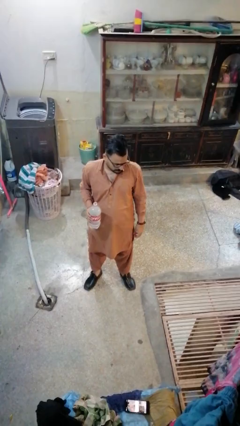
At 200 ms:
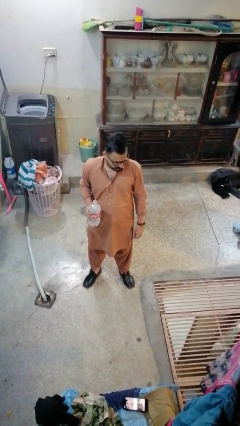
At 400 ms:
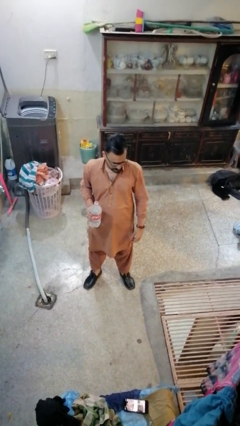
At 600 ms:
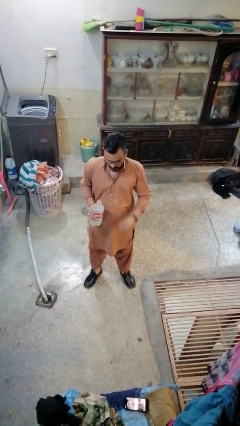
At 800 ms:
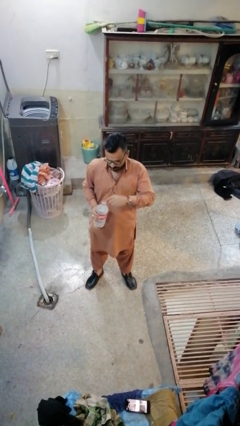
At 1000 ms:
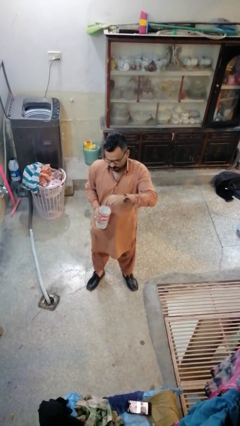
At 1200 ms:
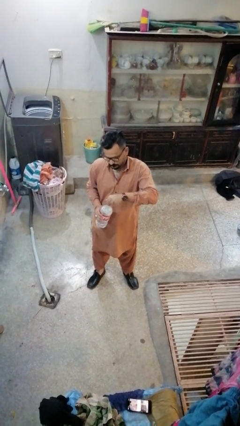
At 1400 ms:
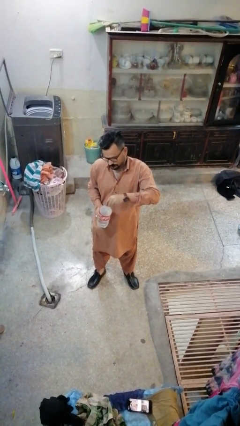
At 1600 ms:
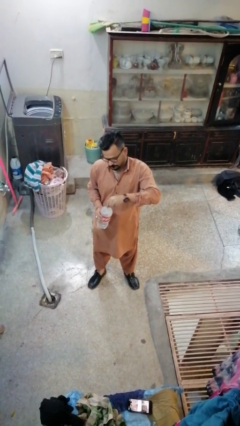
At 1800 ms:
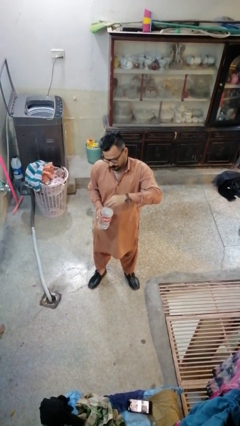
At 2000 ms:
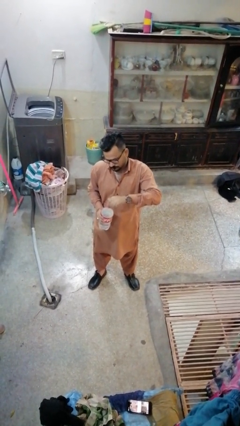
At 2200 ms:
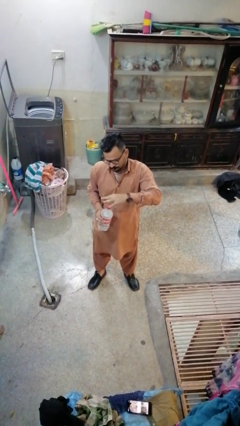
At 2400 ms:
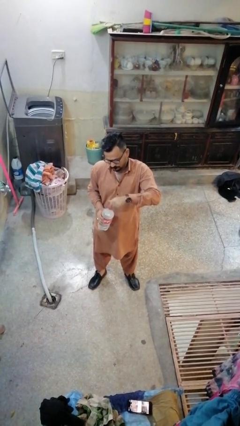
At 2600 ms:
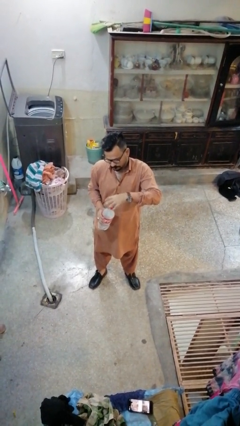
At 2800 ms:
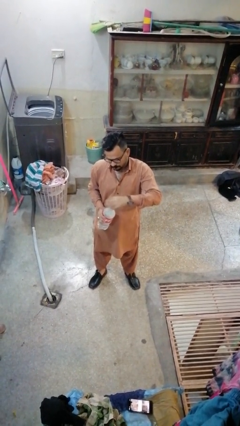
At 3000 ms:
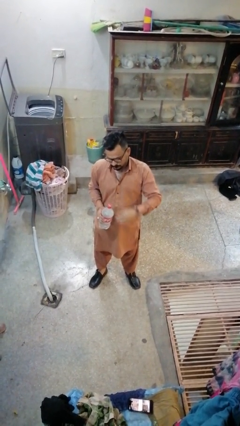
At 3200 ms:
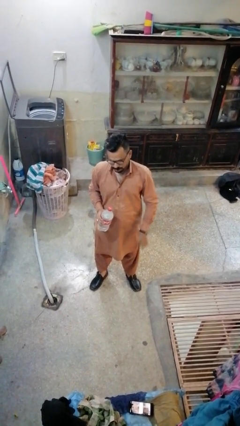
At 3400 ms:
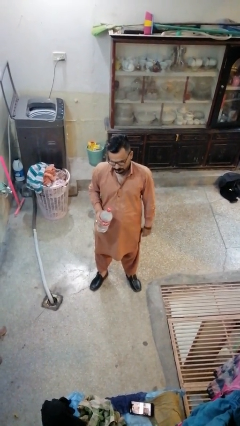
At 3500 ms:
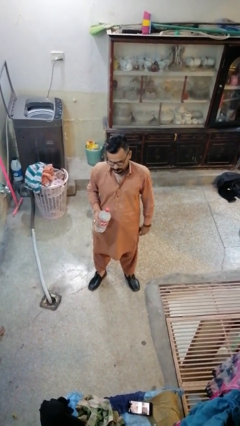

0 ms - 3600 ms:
person screws lid to bottle

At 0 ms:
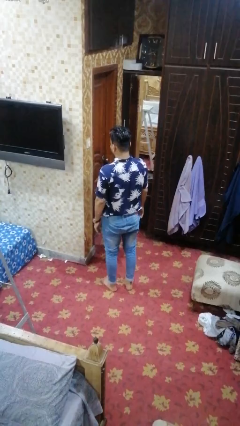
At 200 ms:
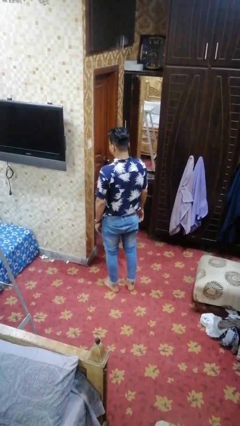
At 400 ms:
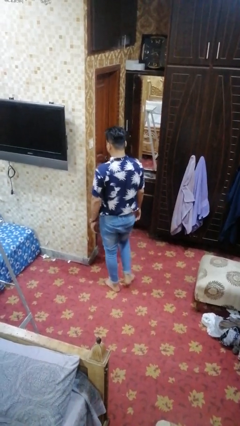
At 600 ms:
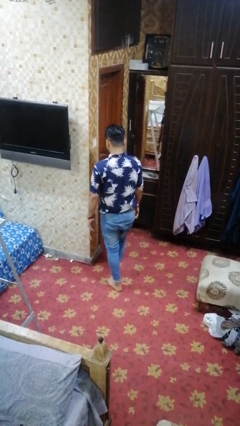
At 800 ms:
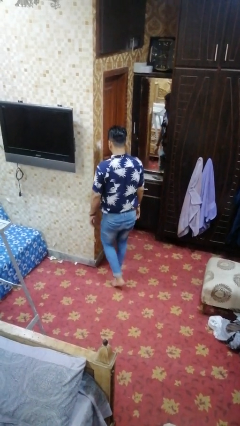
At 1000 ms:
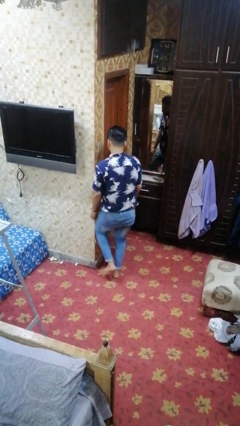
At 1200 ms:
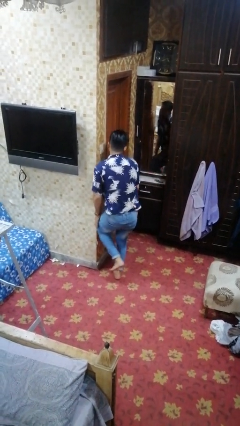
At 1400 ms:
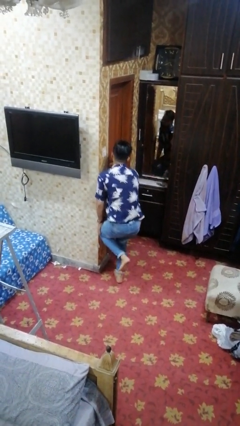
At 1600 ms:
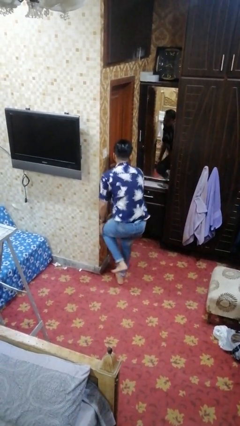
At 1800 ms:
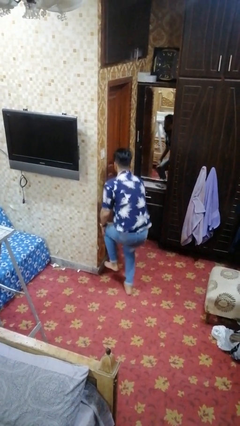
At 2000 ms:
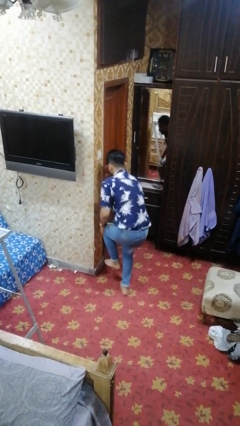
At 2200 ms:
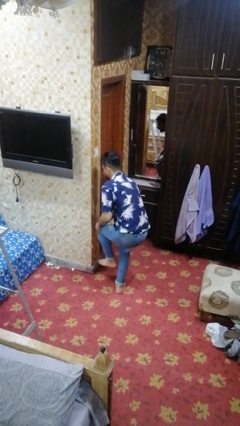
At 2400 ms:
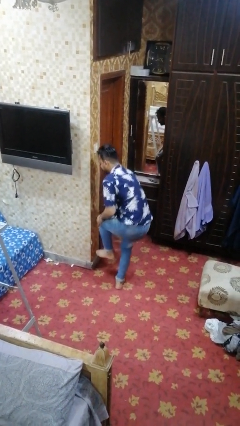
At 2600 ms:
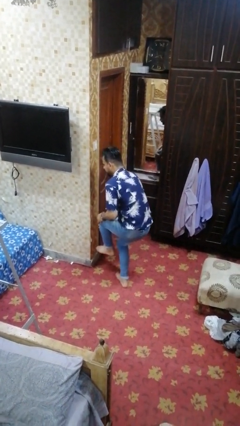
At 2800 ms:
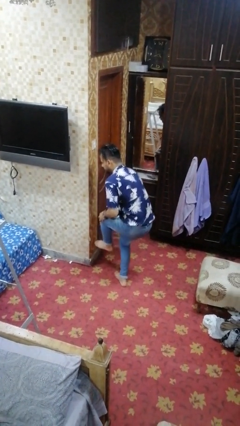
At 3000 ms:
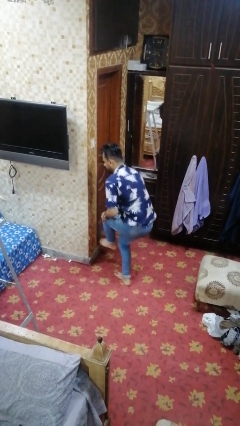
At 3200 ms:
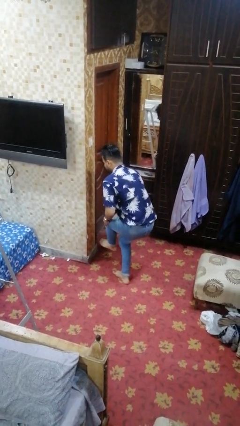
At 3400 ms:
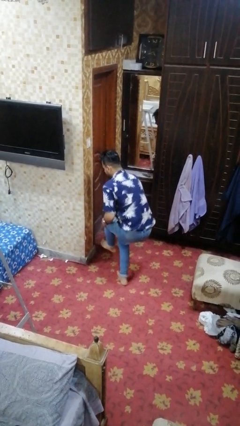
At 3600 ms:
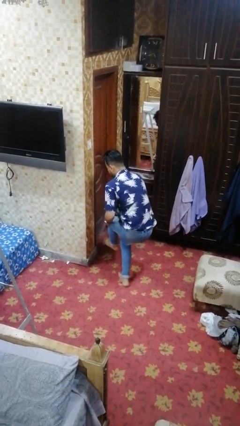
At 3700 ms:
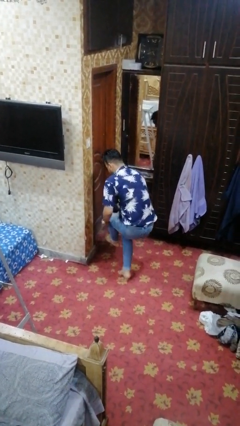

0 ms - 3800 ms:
person trips on object on floor

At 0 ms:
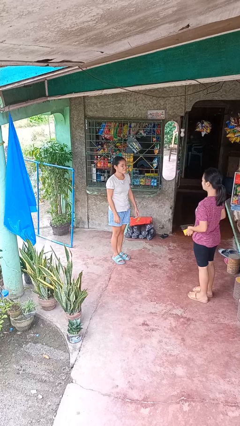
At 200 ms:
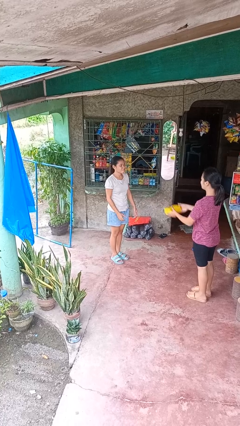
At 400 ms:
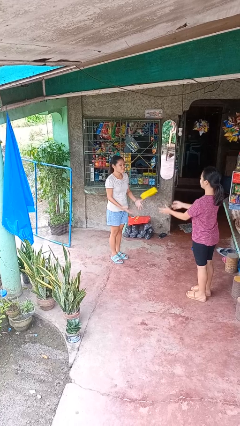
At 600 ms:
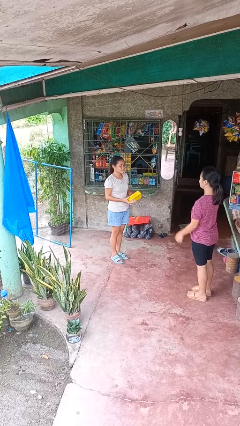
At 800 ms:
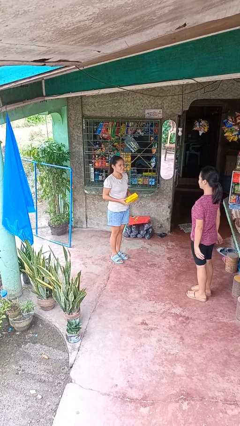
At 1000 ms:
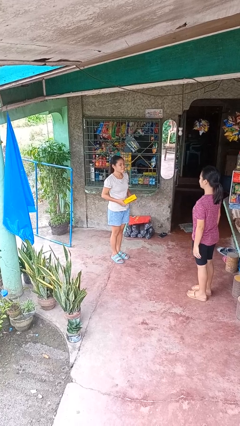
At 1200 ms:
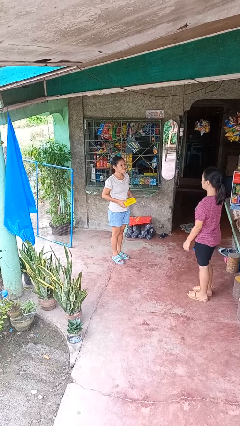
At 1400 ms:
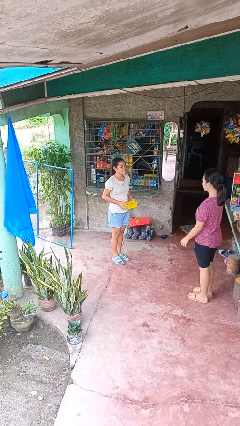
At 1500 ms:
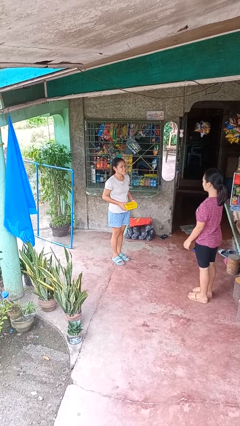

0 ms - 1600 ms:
person catches object from person

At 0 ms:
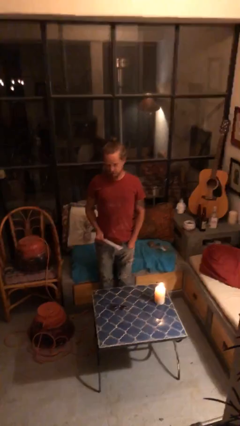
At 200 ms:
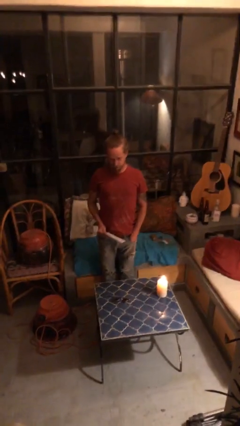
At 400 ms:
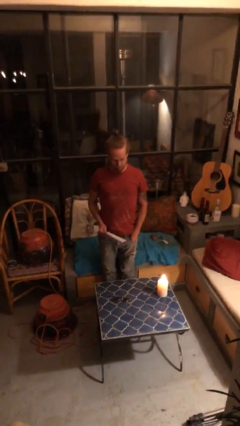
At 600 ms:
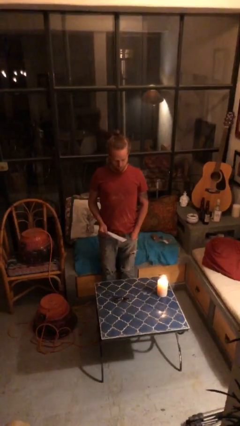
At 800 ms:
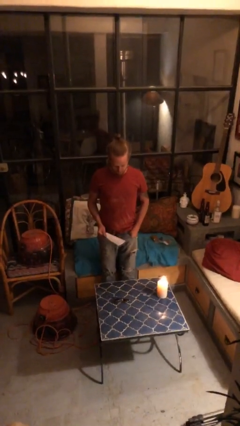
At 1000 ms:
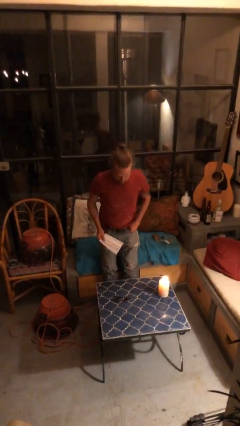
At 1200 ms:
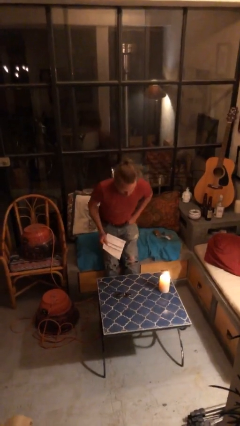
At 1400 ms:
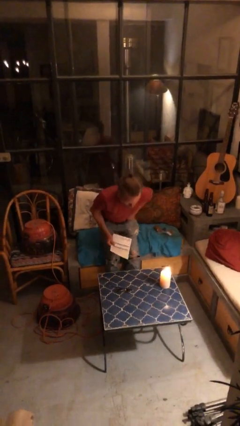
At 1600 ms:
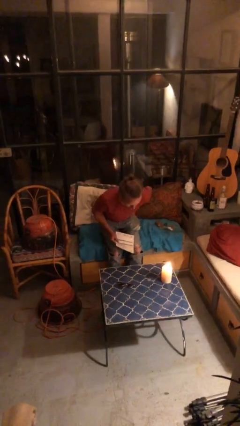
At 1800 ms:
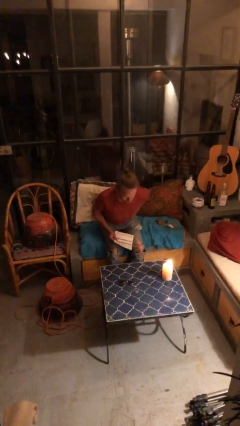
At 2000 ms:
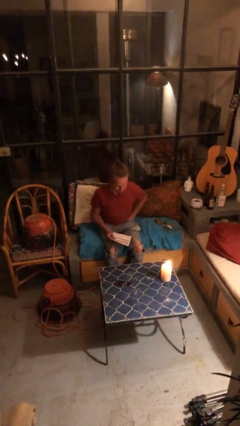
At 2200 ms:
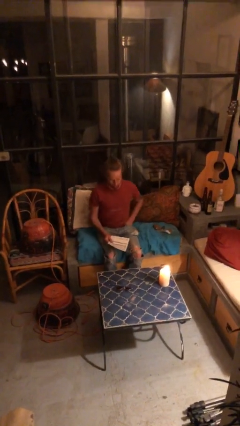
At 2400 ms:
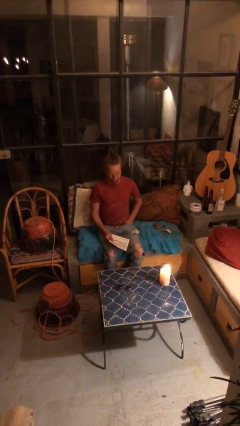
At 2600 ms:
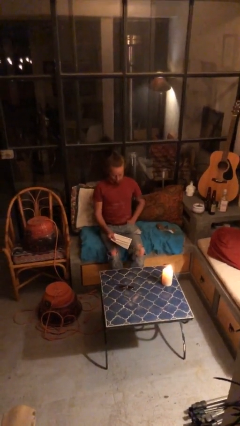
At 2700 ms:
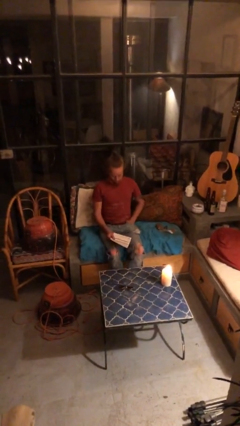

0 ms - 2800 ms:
person sits down

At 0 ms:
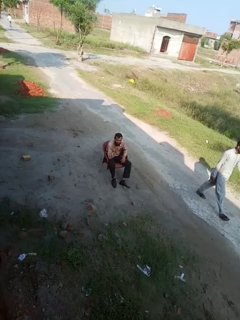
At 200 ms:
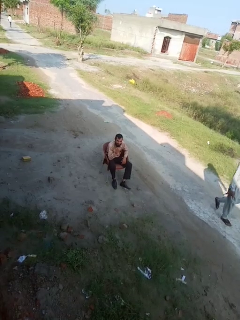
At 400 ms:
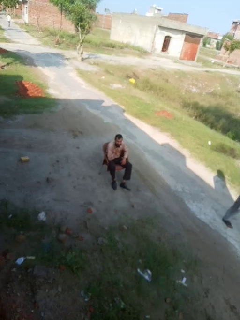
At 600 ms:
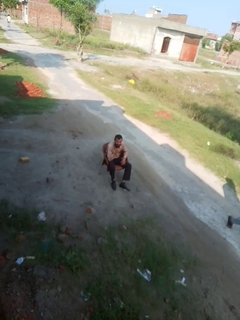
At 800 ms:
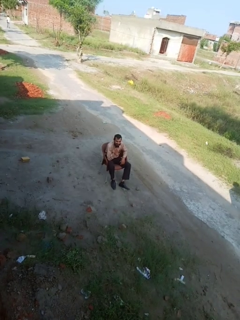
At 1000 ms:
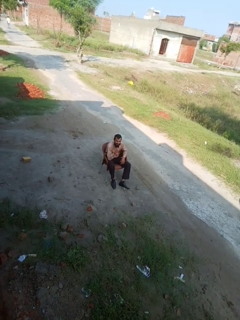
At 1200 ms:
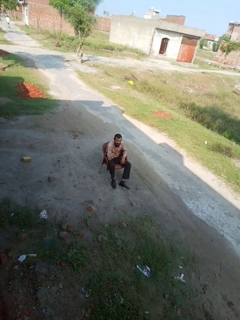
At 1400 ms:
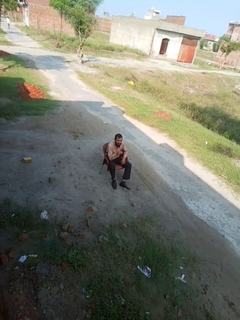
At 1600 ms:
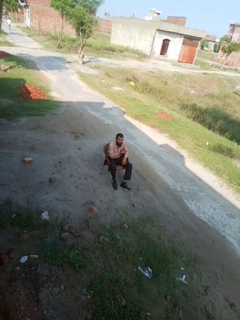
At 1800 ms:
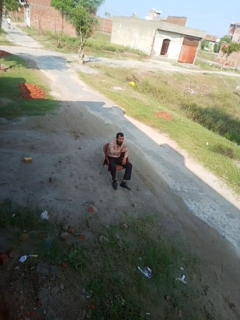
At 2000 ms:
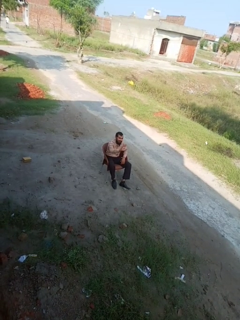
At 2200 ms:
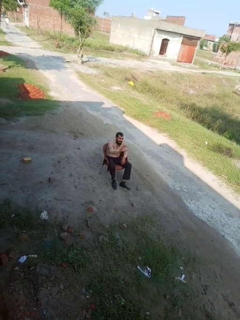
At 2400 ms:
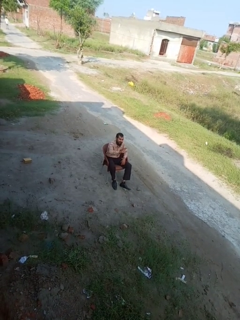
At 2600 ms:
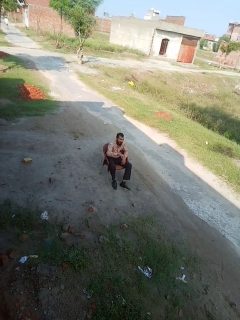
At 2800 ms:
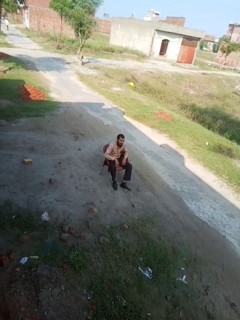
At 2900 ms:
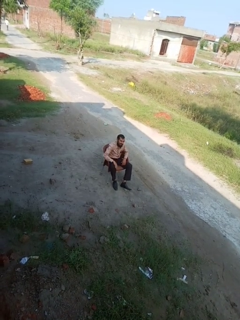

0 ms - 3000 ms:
person gestures number five

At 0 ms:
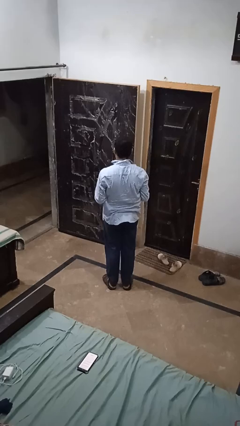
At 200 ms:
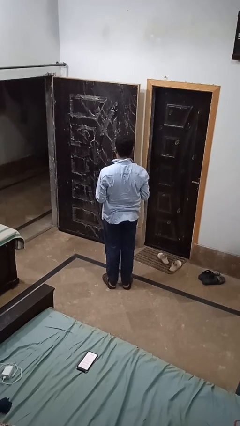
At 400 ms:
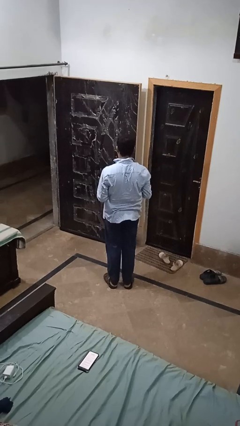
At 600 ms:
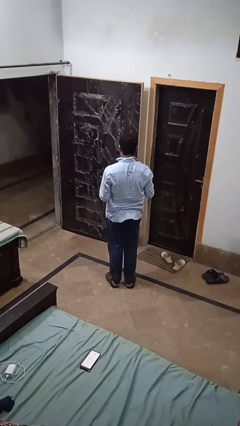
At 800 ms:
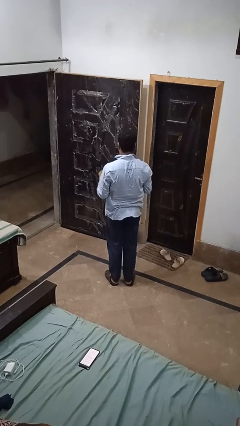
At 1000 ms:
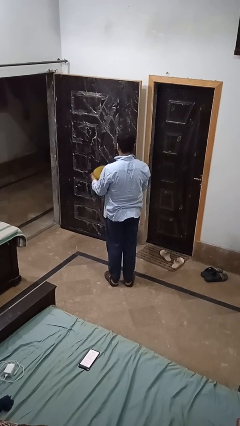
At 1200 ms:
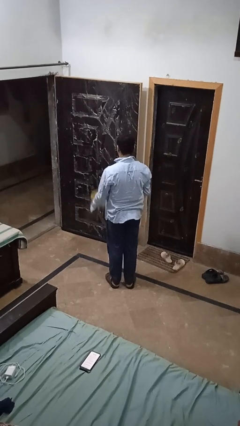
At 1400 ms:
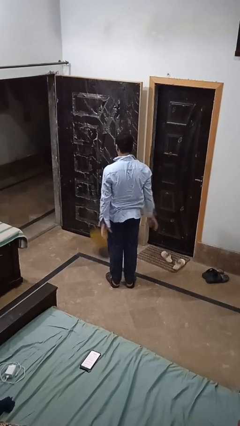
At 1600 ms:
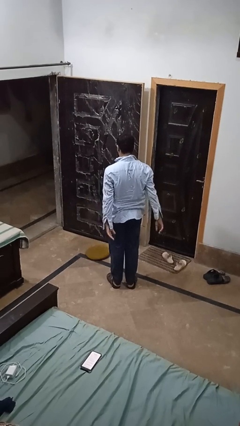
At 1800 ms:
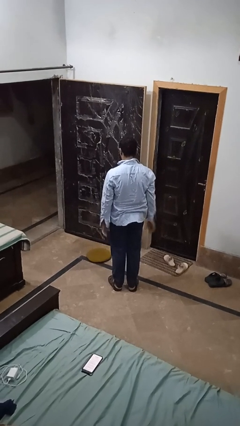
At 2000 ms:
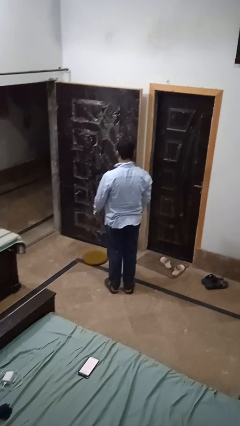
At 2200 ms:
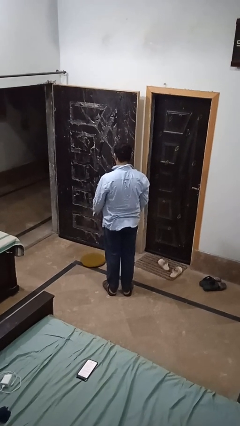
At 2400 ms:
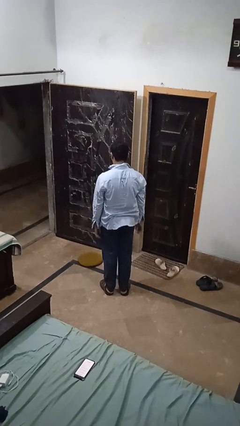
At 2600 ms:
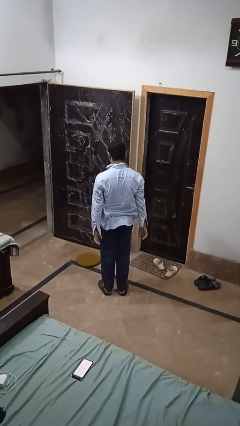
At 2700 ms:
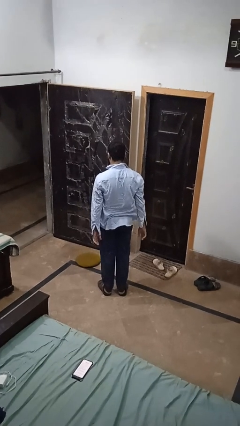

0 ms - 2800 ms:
person throws object to ground

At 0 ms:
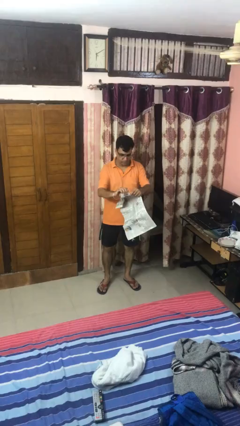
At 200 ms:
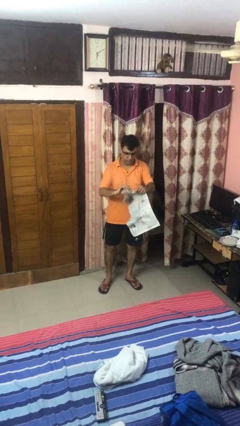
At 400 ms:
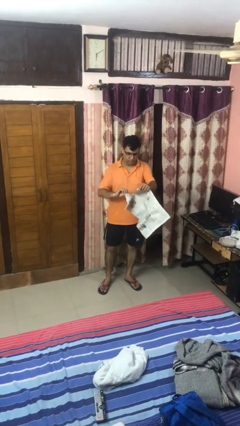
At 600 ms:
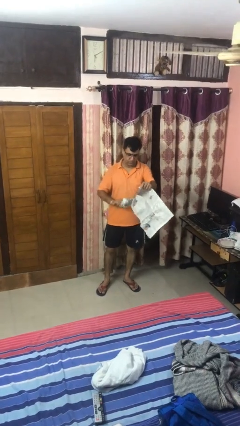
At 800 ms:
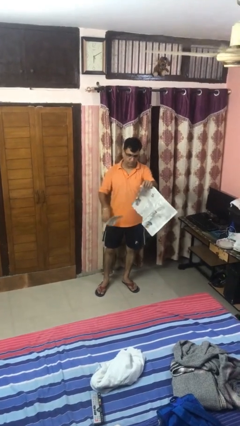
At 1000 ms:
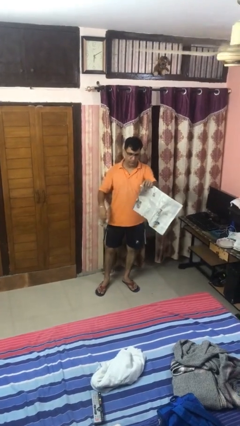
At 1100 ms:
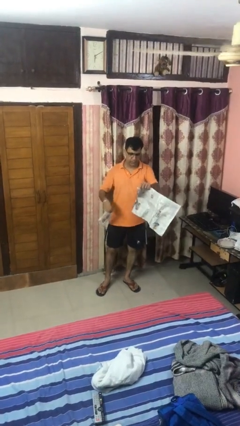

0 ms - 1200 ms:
person tears paper
